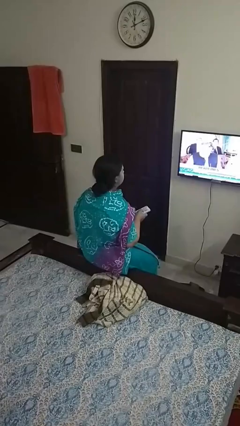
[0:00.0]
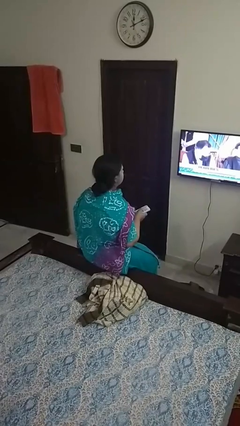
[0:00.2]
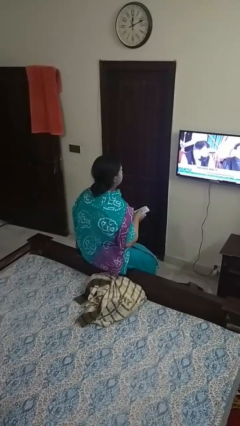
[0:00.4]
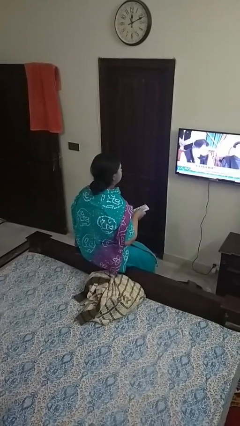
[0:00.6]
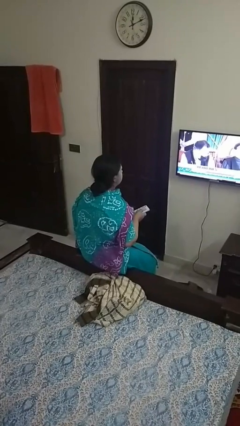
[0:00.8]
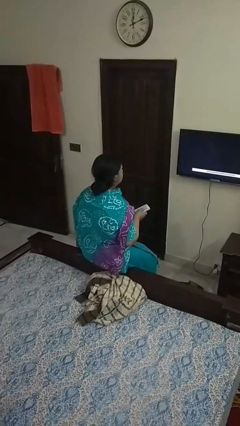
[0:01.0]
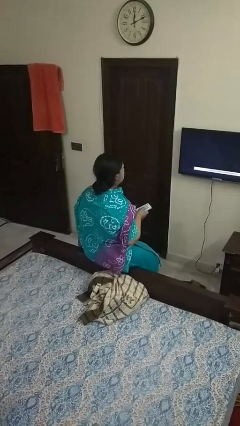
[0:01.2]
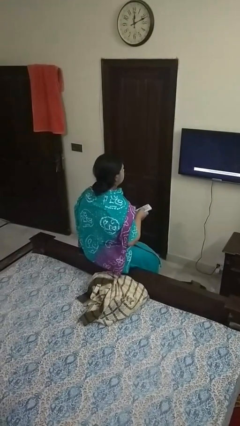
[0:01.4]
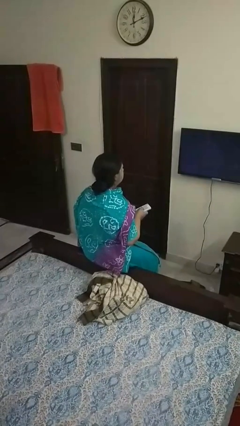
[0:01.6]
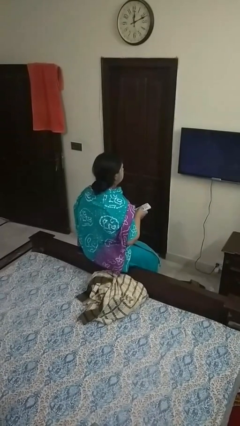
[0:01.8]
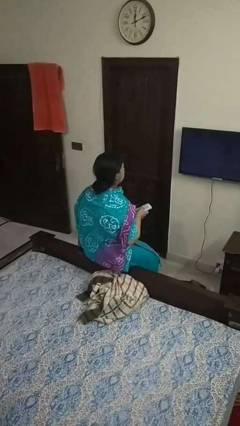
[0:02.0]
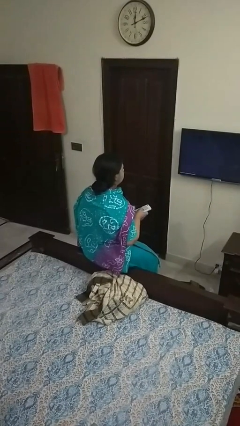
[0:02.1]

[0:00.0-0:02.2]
person uses television remote

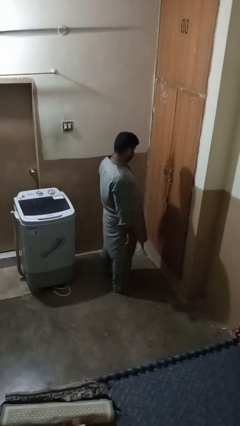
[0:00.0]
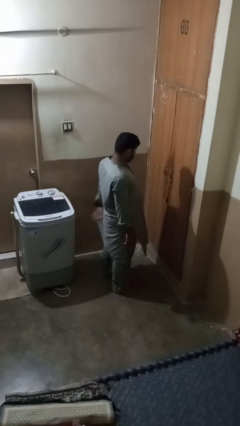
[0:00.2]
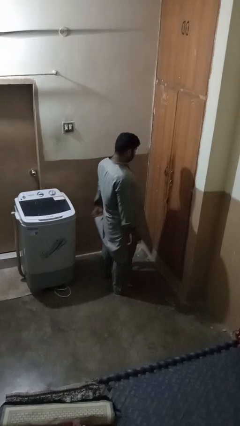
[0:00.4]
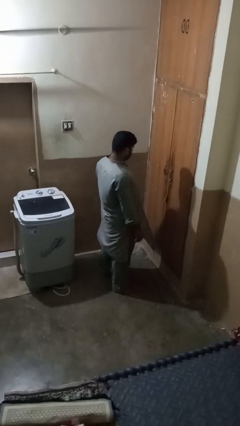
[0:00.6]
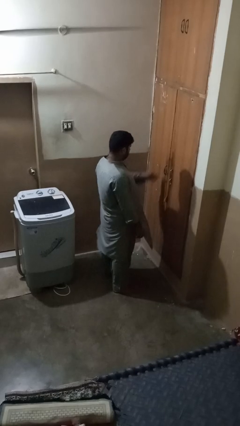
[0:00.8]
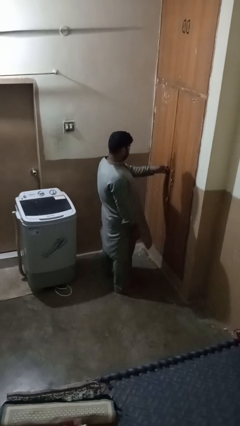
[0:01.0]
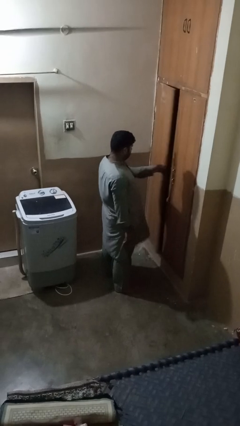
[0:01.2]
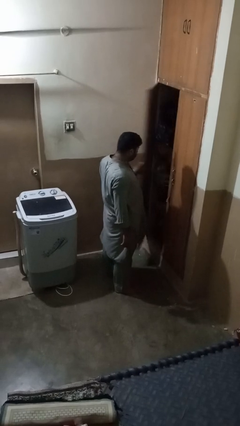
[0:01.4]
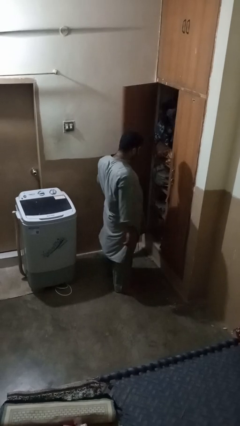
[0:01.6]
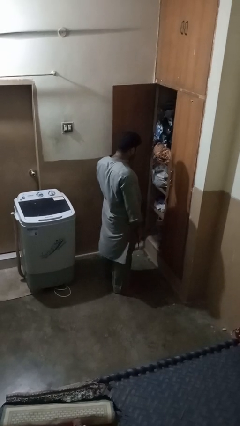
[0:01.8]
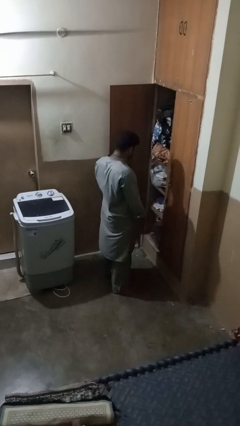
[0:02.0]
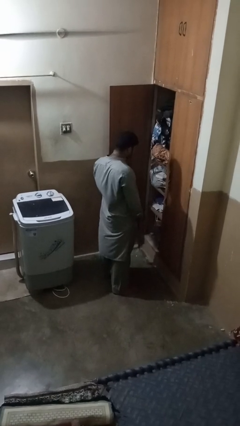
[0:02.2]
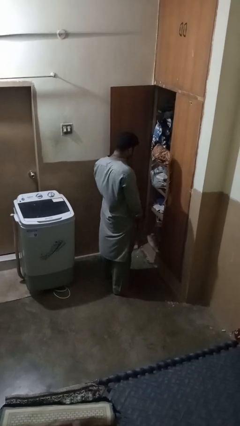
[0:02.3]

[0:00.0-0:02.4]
person opens closet door

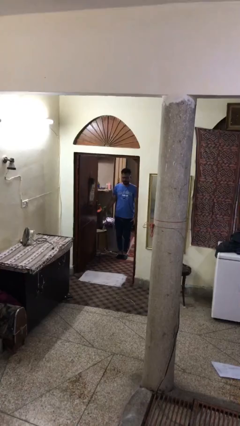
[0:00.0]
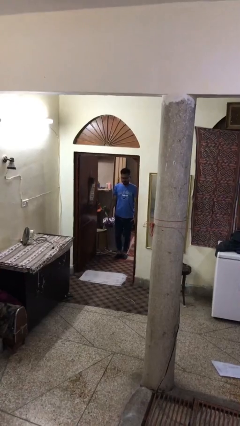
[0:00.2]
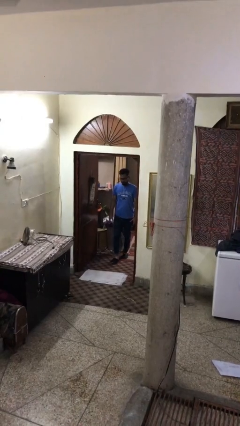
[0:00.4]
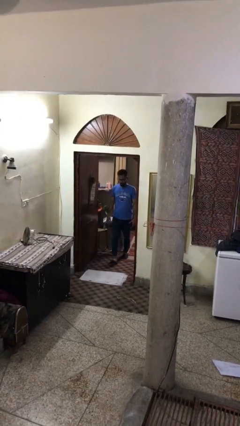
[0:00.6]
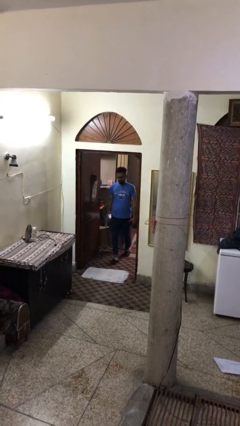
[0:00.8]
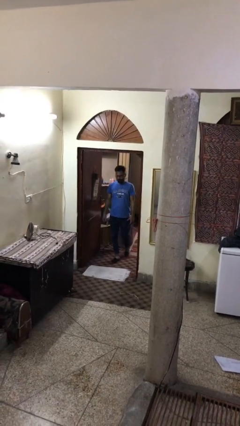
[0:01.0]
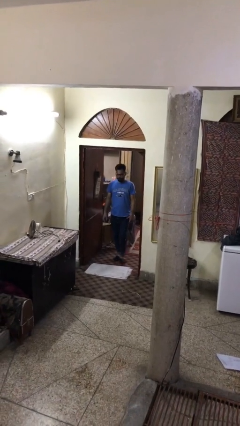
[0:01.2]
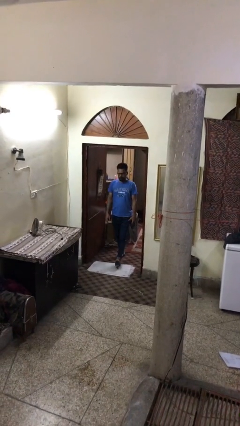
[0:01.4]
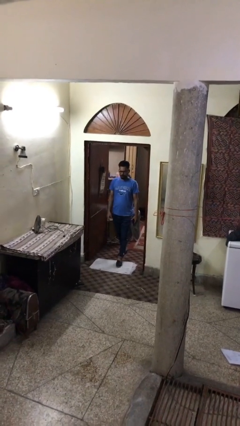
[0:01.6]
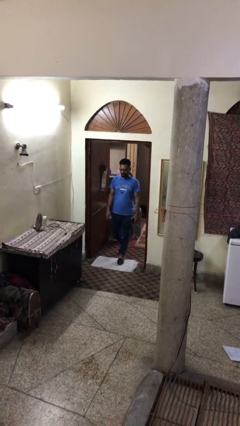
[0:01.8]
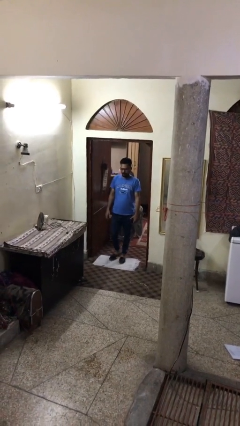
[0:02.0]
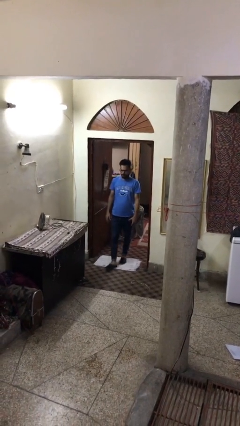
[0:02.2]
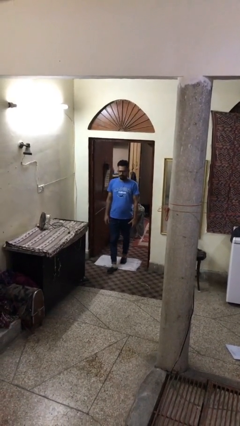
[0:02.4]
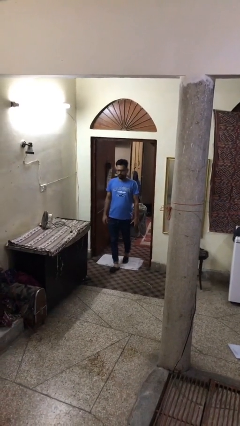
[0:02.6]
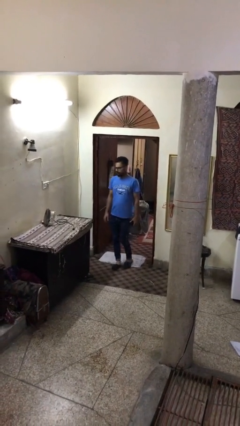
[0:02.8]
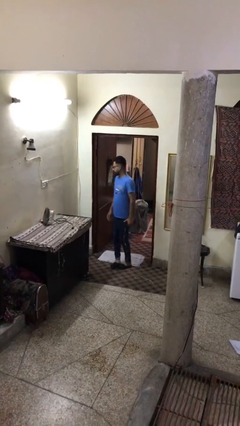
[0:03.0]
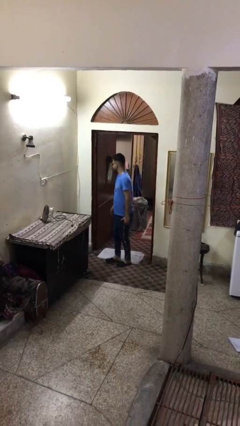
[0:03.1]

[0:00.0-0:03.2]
person enters scene through structure

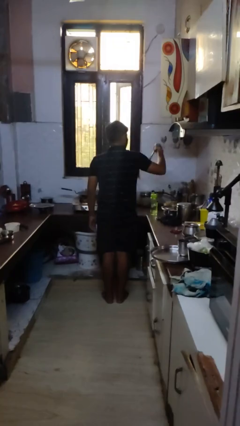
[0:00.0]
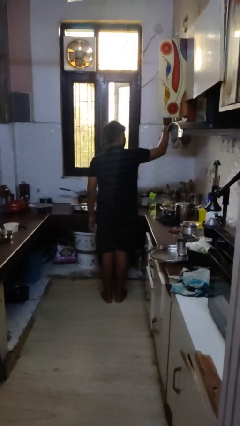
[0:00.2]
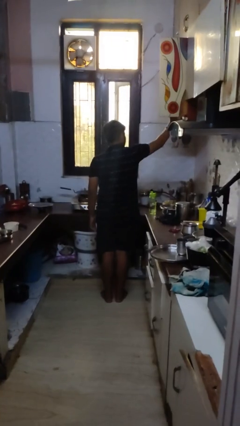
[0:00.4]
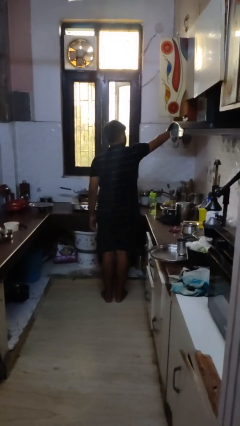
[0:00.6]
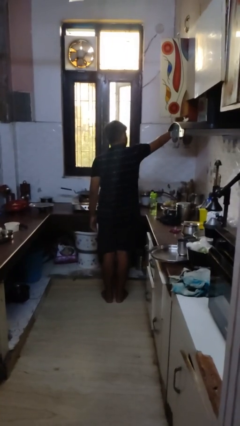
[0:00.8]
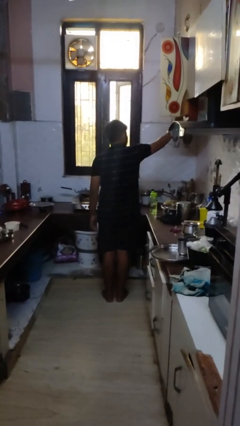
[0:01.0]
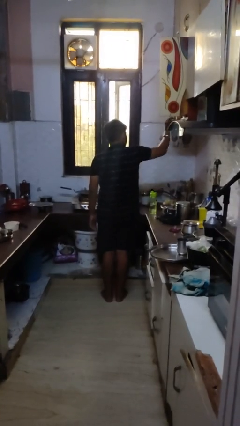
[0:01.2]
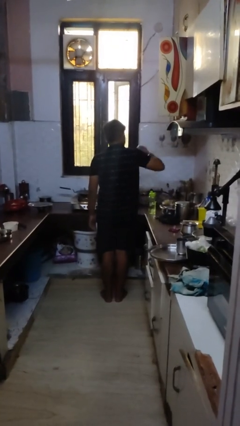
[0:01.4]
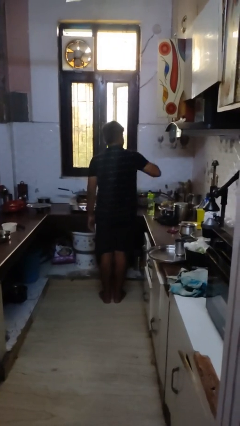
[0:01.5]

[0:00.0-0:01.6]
person puts object in cabinet

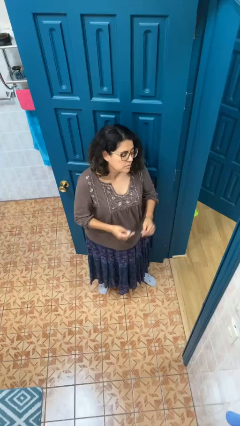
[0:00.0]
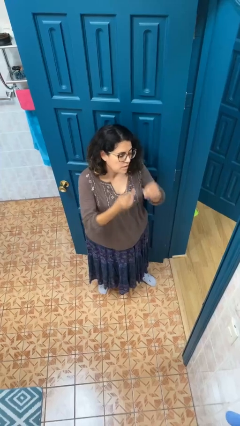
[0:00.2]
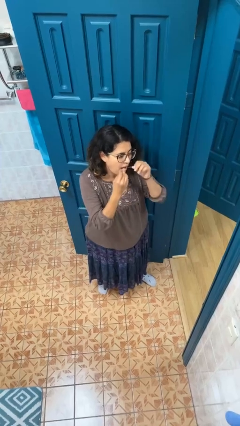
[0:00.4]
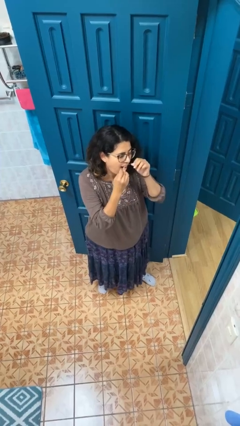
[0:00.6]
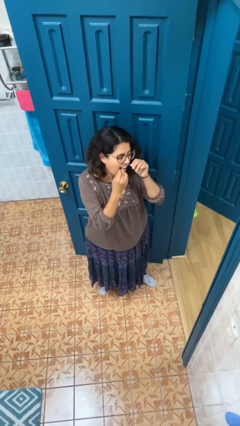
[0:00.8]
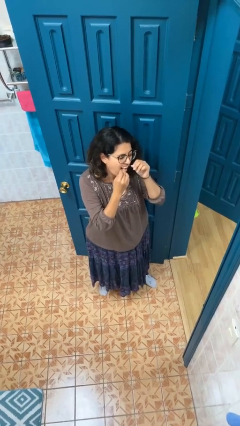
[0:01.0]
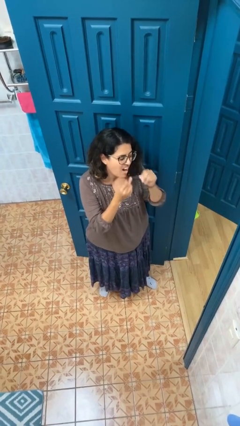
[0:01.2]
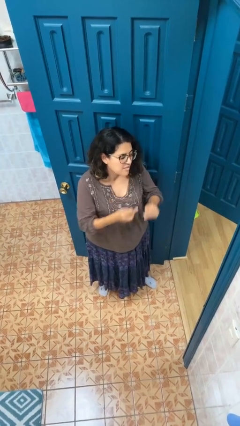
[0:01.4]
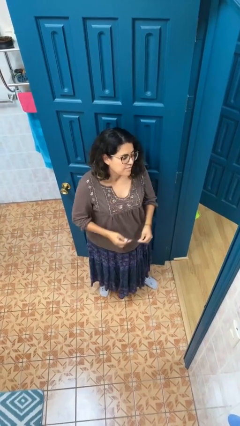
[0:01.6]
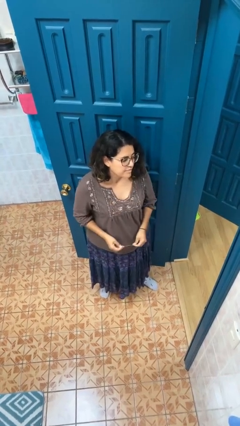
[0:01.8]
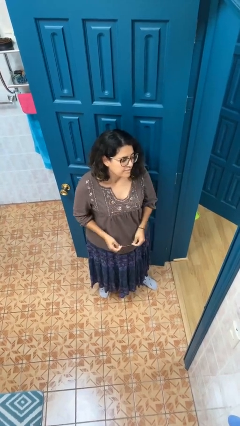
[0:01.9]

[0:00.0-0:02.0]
person flosses

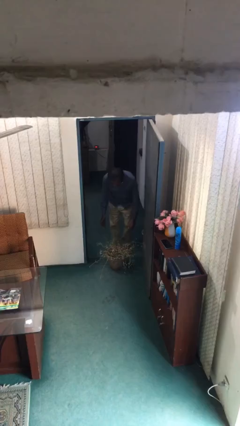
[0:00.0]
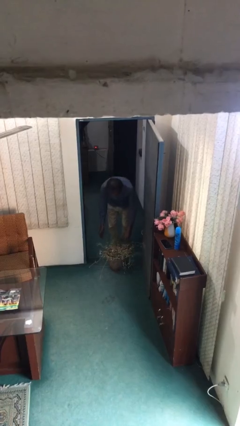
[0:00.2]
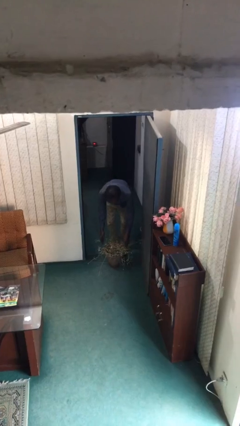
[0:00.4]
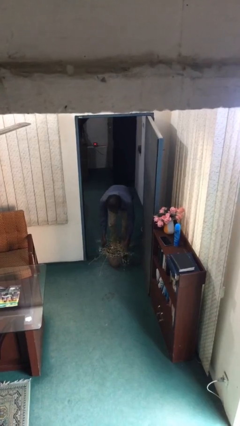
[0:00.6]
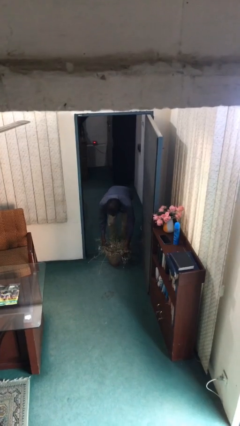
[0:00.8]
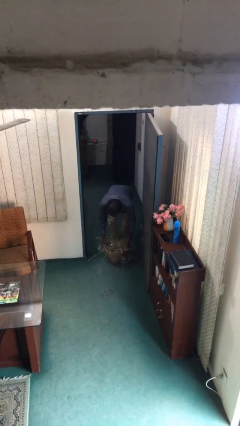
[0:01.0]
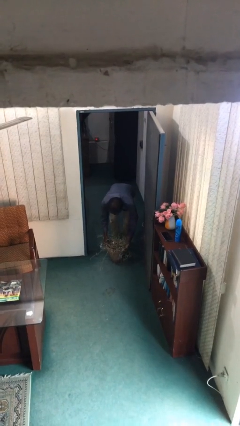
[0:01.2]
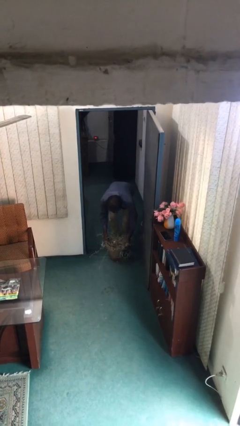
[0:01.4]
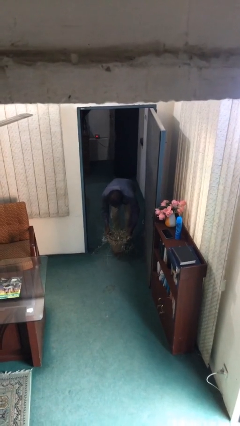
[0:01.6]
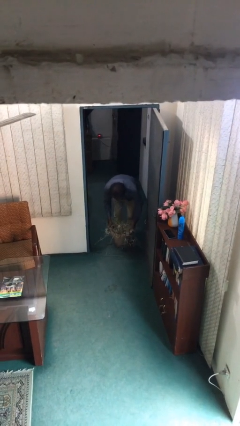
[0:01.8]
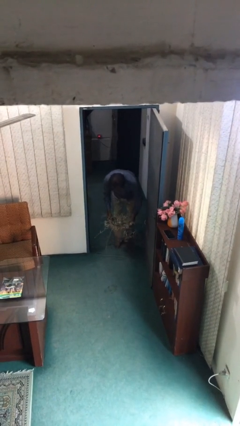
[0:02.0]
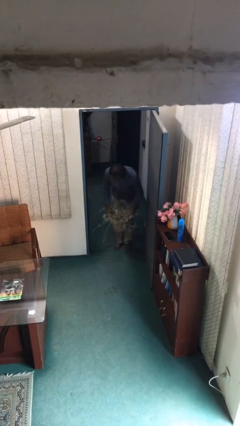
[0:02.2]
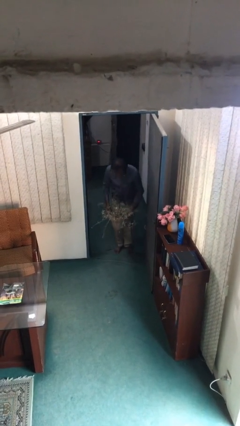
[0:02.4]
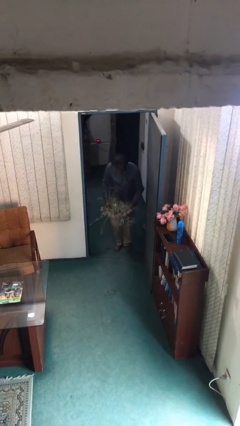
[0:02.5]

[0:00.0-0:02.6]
person picks up object from floor

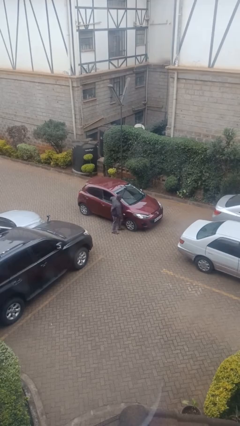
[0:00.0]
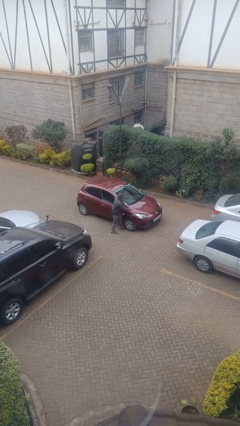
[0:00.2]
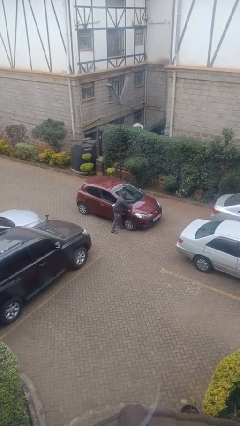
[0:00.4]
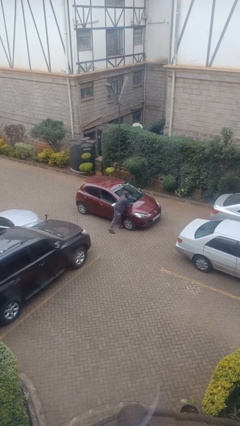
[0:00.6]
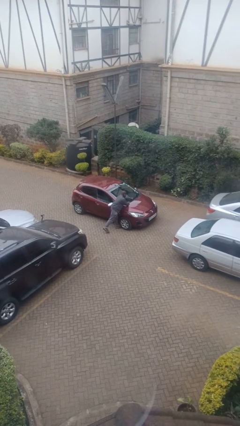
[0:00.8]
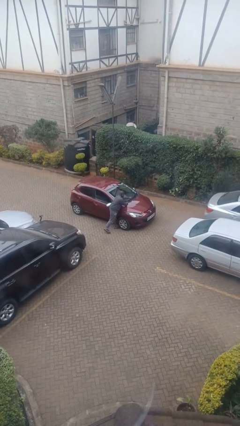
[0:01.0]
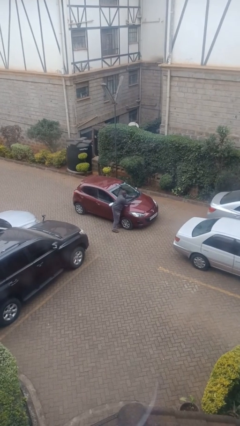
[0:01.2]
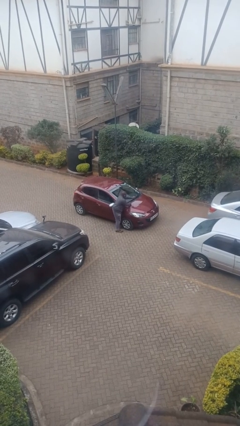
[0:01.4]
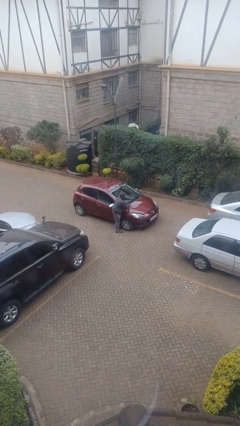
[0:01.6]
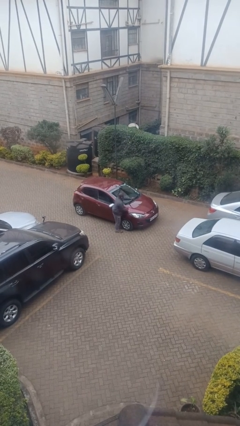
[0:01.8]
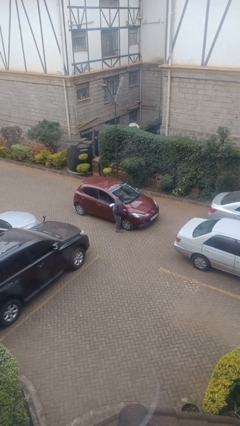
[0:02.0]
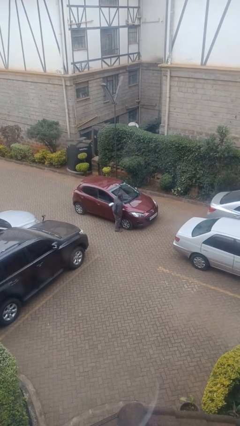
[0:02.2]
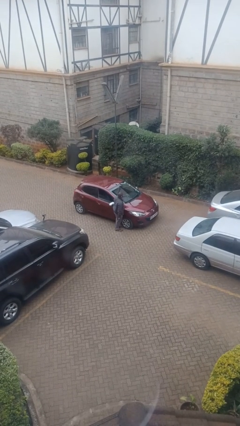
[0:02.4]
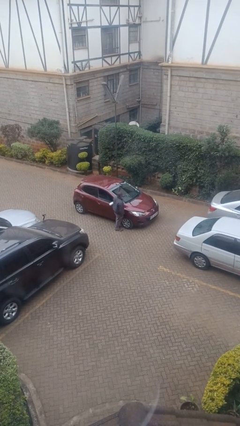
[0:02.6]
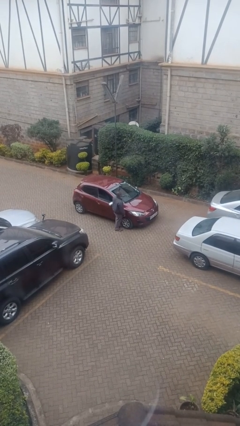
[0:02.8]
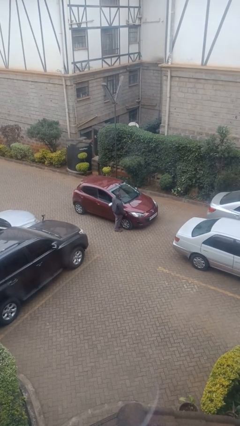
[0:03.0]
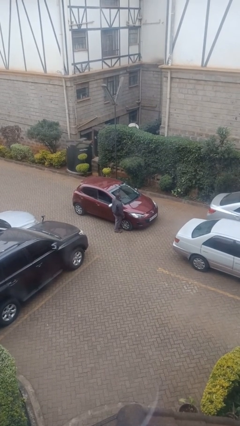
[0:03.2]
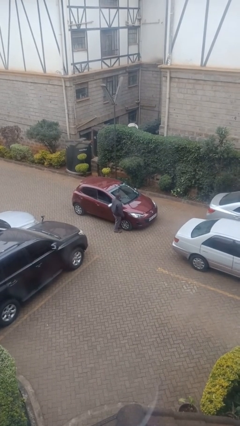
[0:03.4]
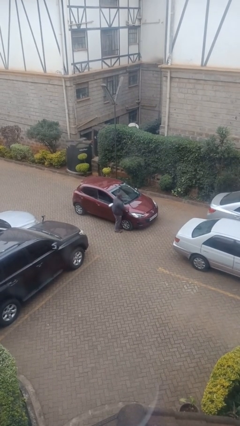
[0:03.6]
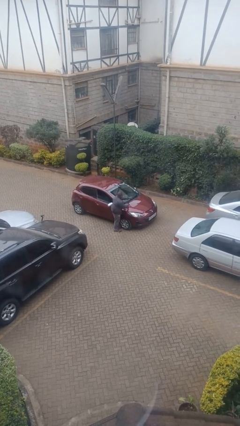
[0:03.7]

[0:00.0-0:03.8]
person flips up car wipers
